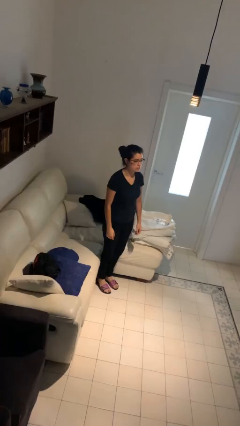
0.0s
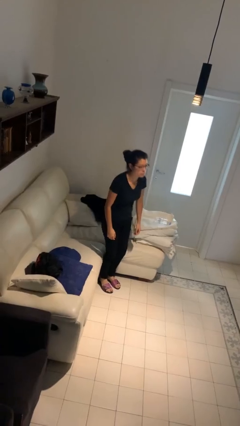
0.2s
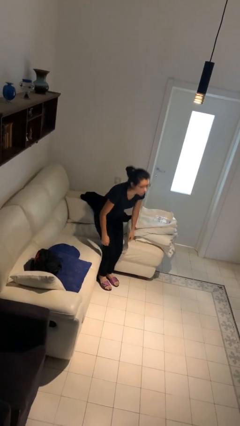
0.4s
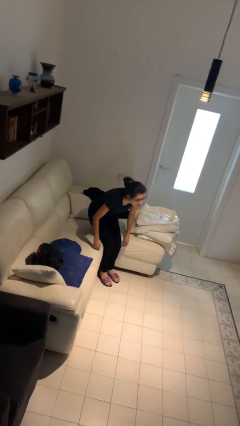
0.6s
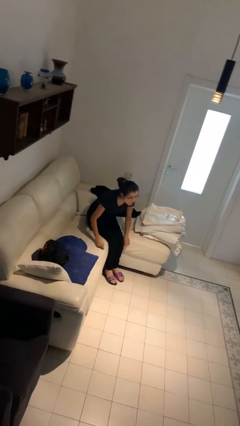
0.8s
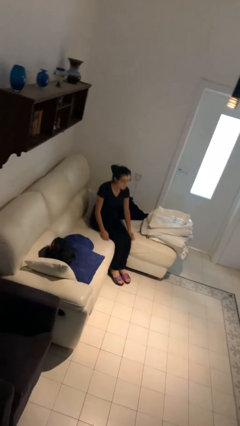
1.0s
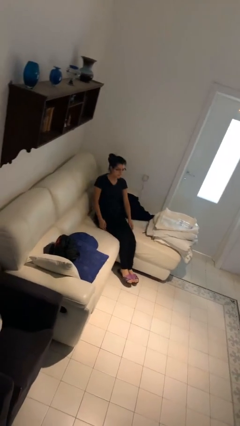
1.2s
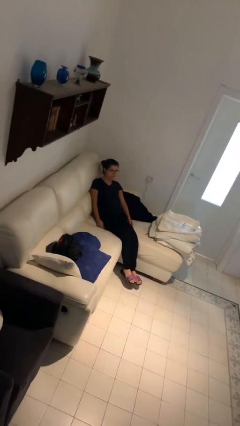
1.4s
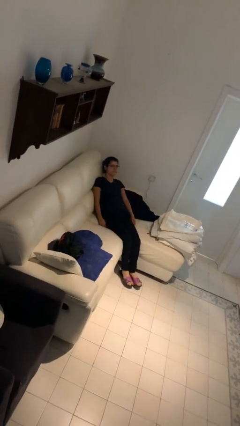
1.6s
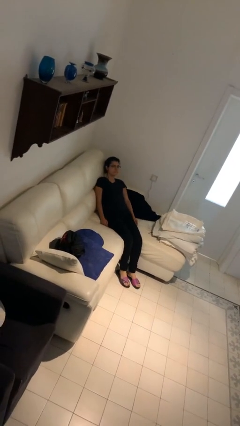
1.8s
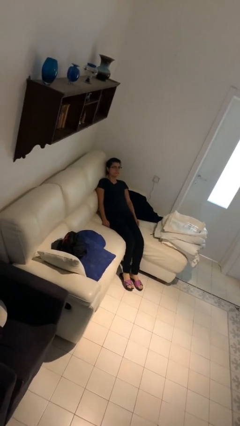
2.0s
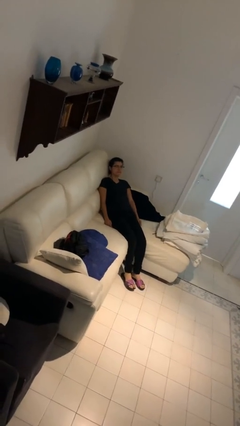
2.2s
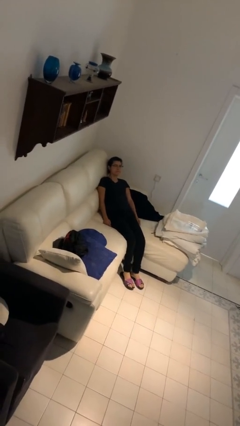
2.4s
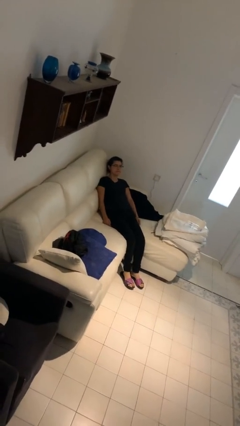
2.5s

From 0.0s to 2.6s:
person lies down on couch

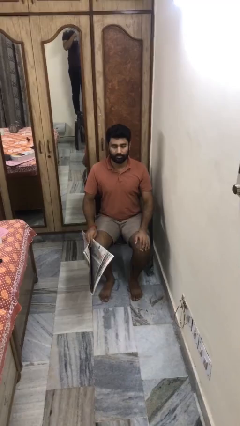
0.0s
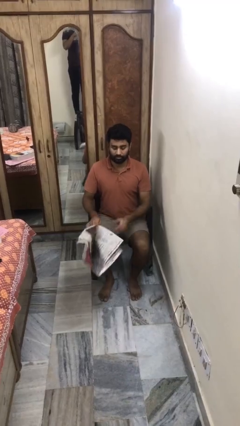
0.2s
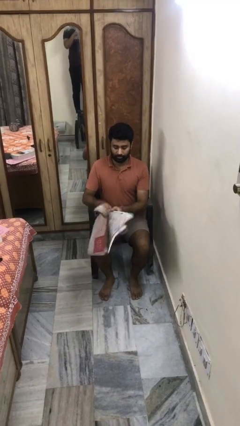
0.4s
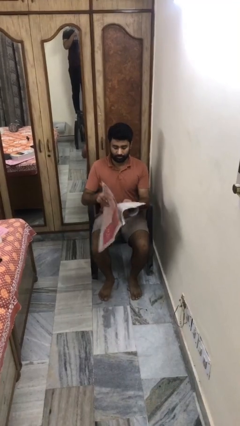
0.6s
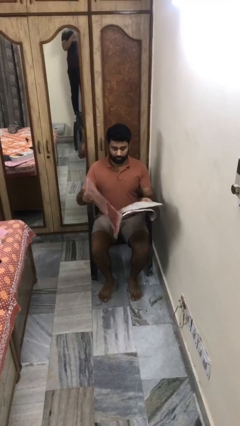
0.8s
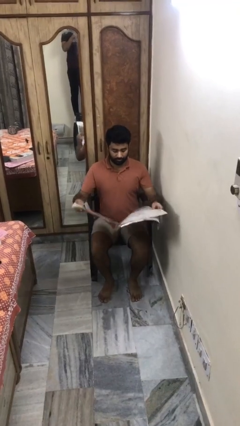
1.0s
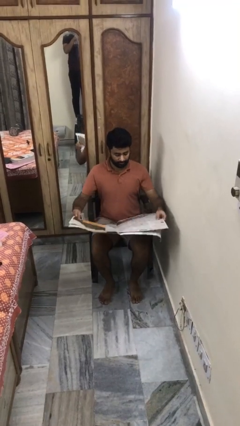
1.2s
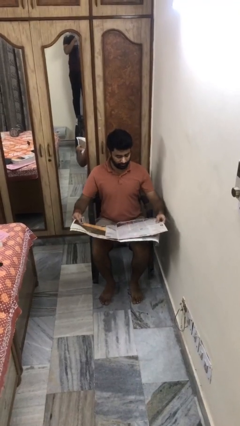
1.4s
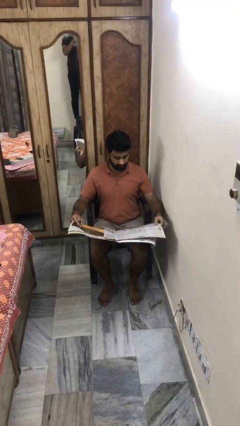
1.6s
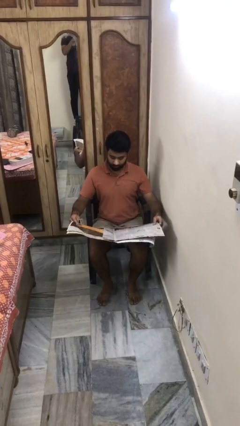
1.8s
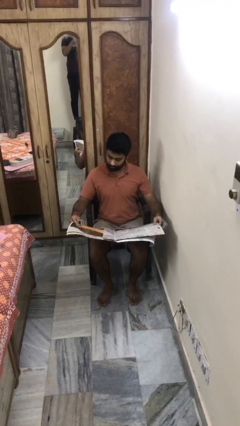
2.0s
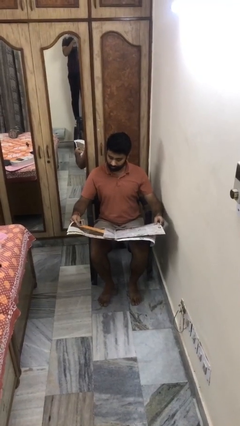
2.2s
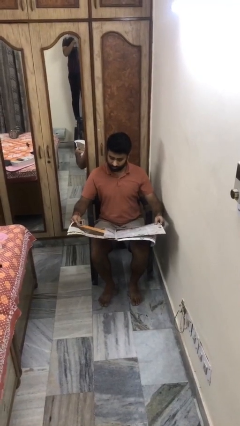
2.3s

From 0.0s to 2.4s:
person reads newspaper

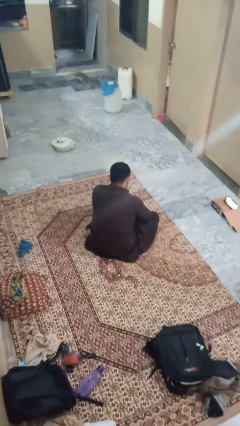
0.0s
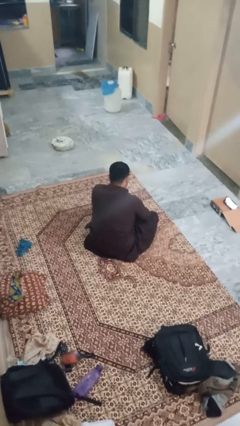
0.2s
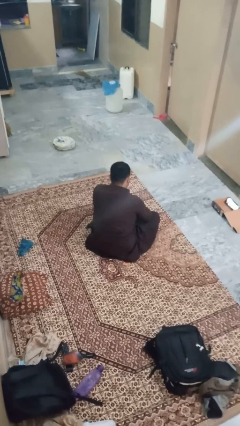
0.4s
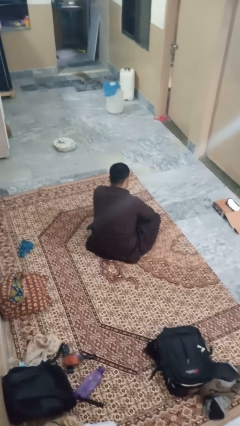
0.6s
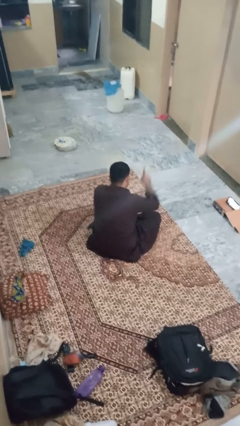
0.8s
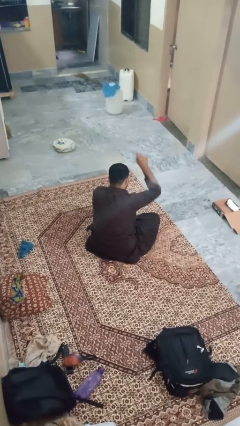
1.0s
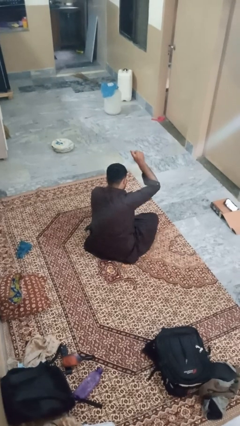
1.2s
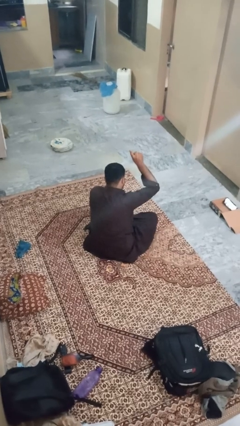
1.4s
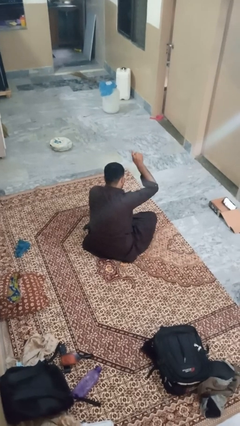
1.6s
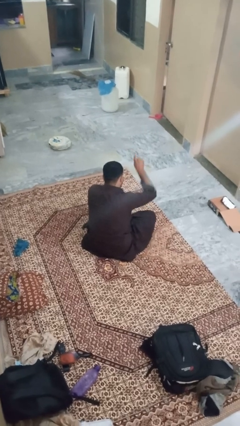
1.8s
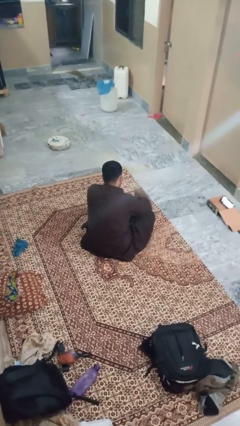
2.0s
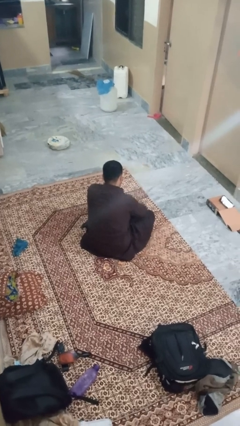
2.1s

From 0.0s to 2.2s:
person gestures number one

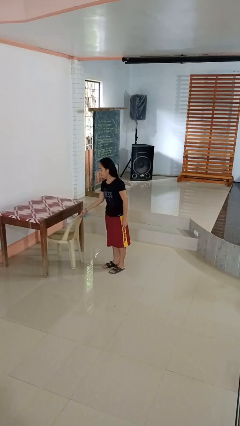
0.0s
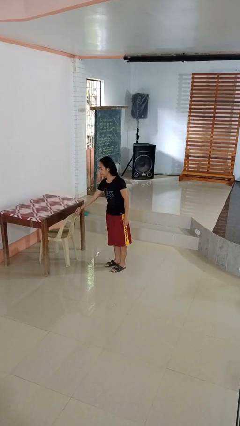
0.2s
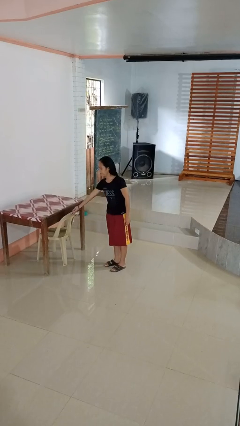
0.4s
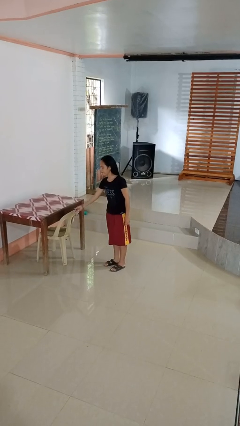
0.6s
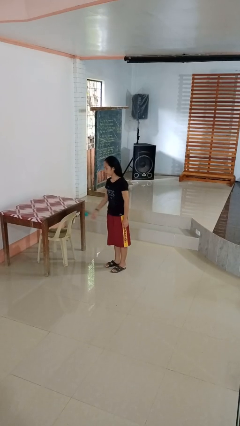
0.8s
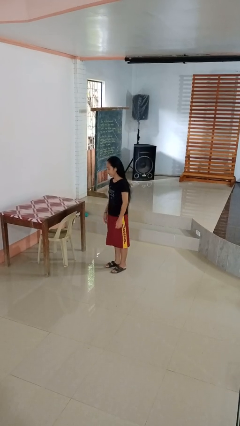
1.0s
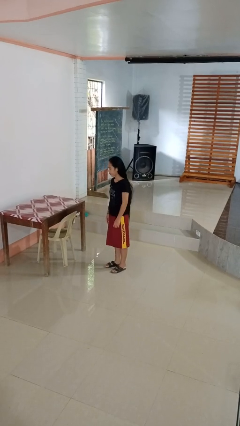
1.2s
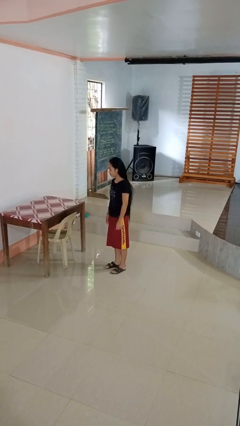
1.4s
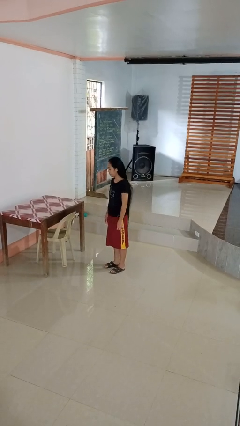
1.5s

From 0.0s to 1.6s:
person pushes in chair

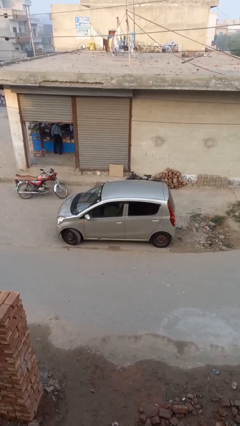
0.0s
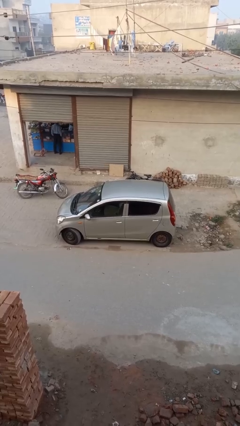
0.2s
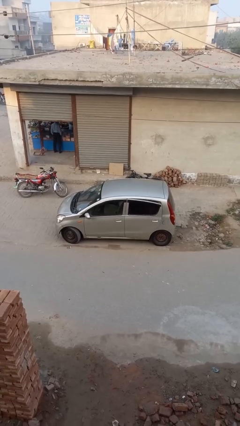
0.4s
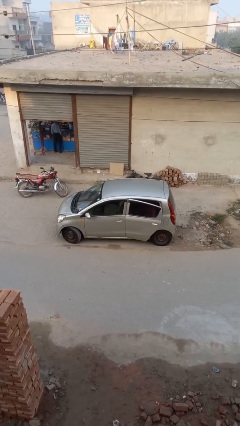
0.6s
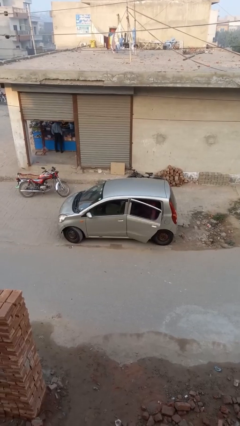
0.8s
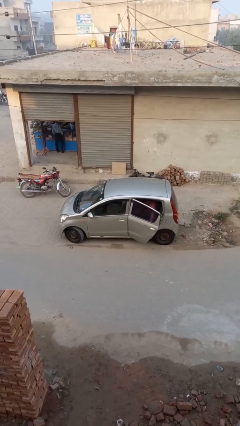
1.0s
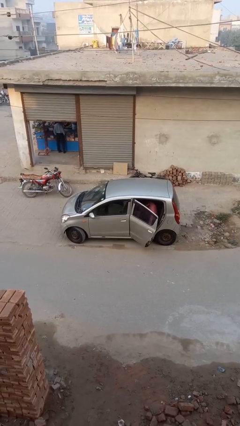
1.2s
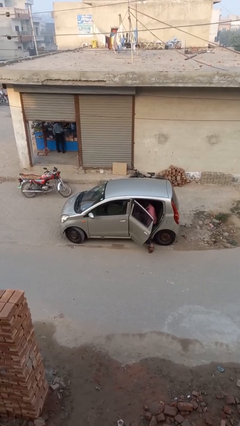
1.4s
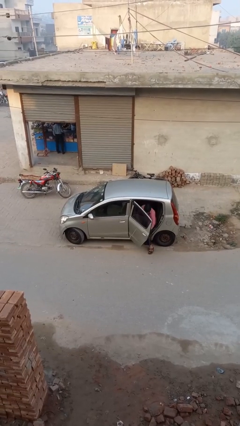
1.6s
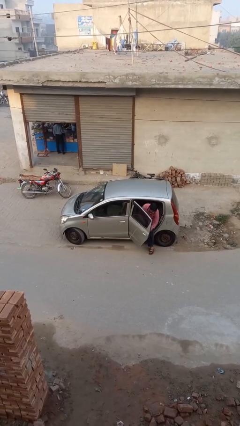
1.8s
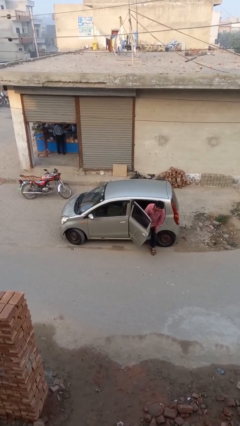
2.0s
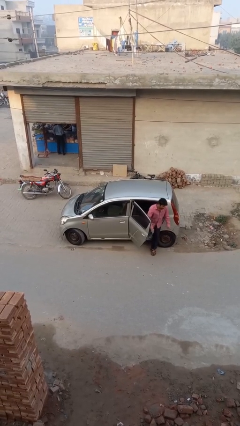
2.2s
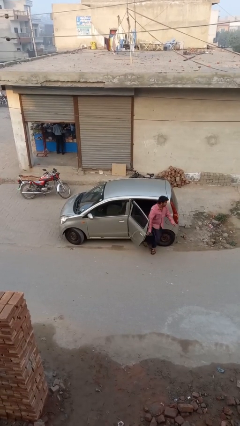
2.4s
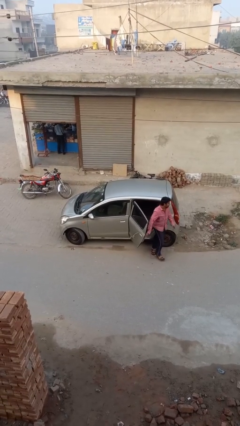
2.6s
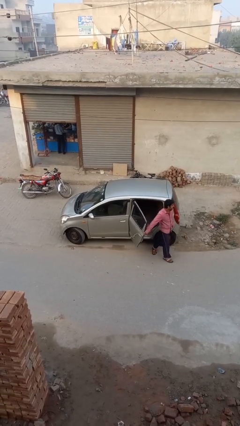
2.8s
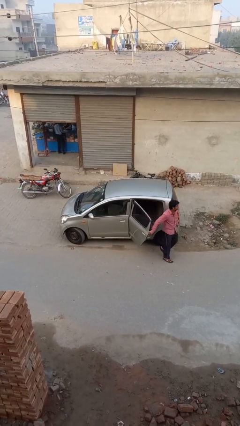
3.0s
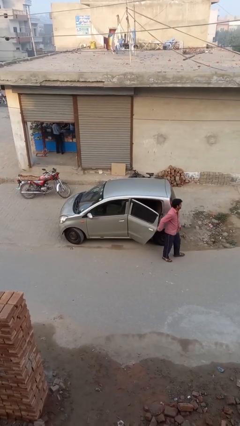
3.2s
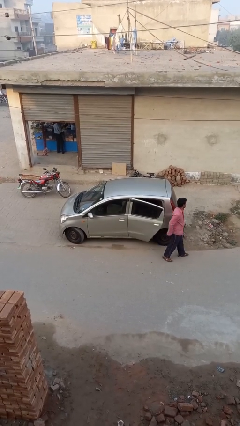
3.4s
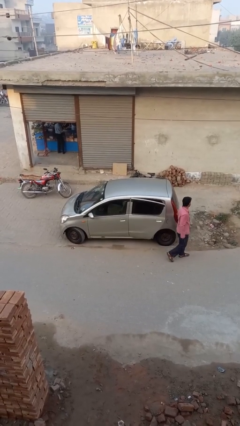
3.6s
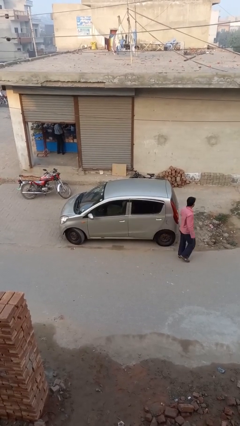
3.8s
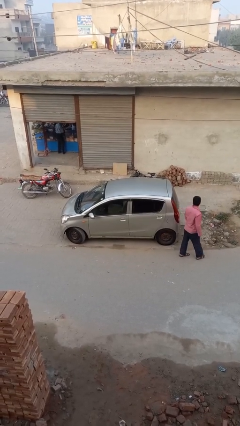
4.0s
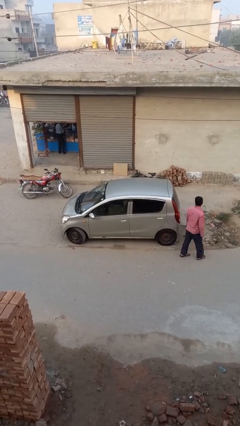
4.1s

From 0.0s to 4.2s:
car drops off person

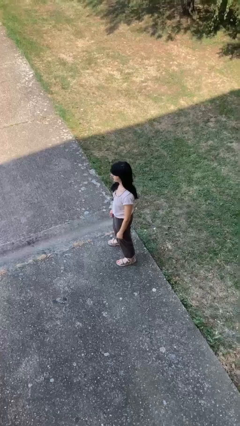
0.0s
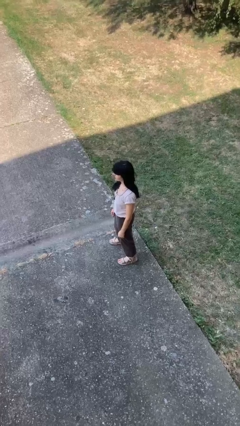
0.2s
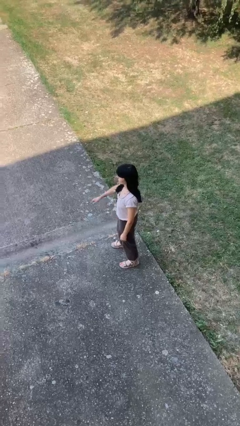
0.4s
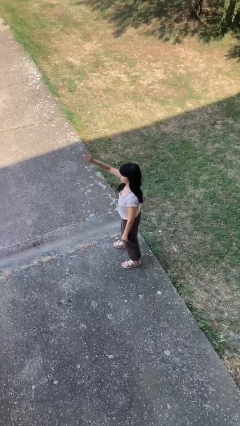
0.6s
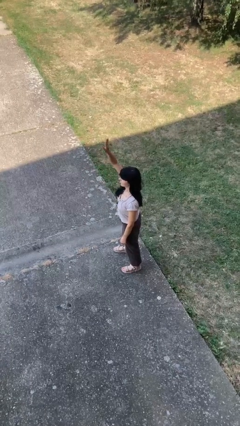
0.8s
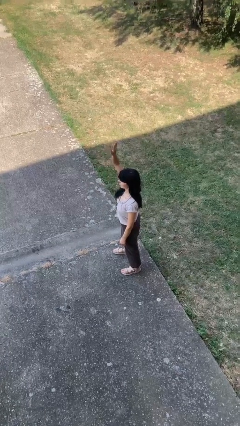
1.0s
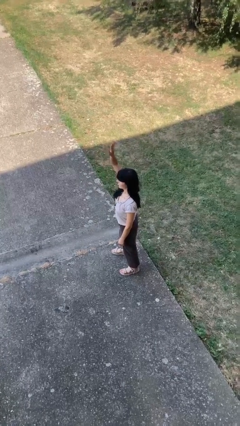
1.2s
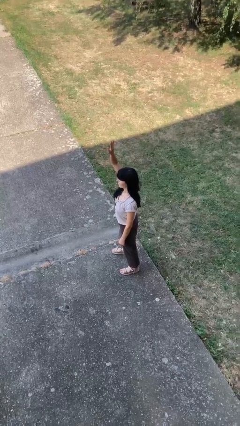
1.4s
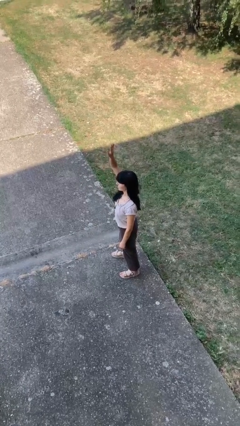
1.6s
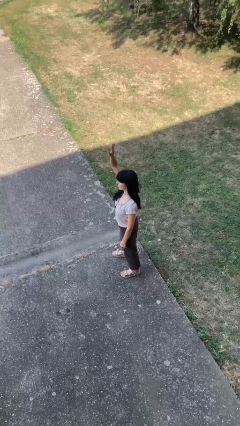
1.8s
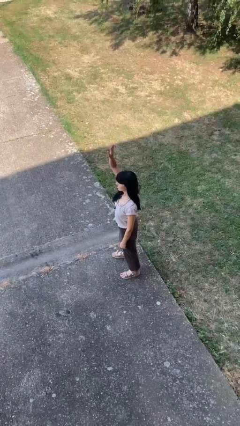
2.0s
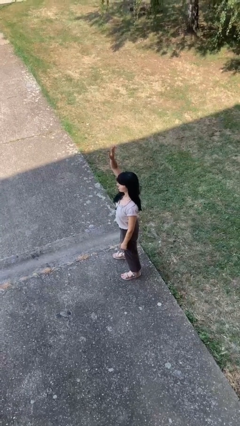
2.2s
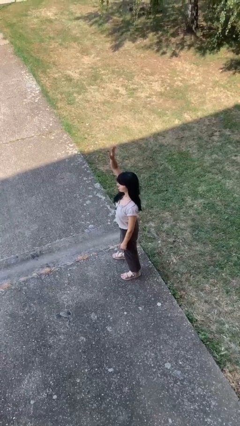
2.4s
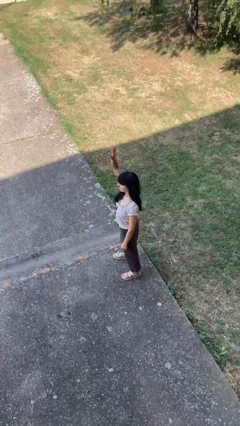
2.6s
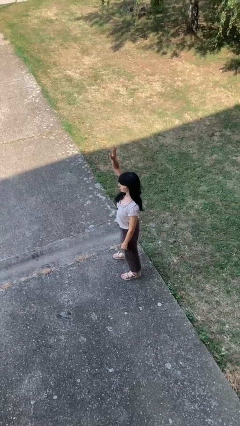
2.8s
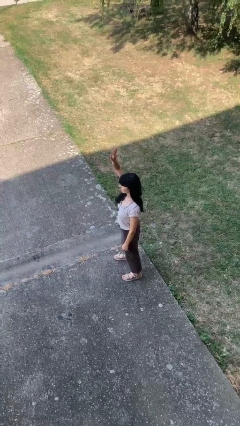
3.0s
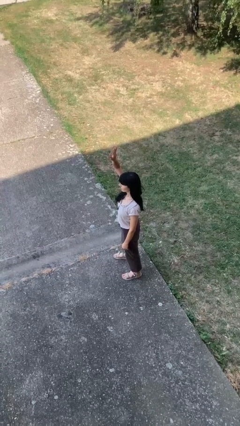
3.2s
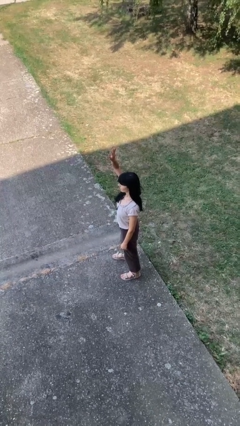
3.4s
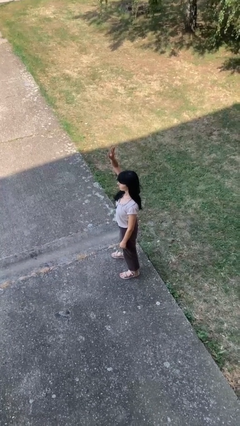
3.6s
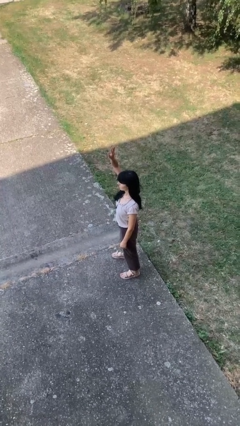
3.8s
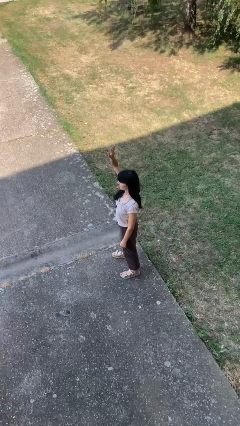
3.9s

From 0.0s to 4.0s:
person gestures raise hand

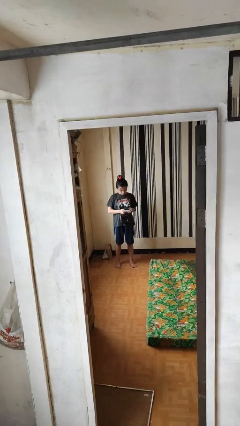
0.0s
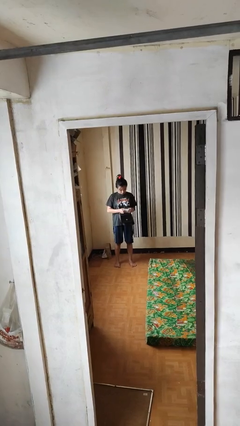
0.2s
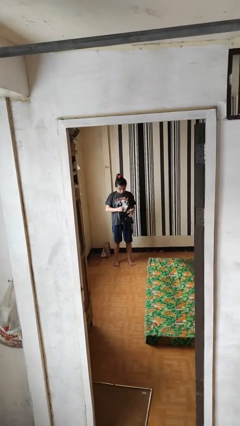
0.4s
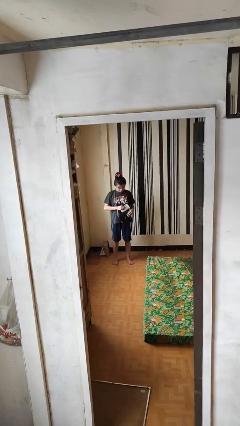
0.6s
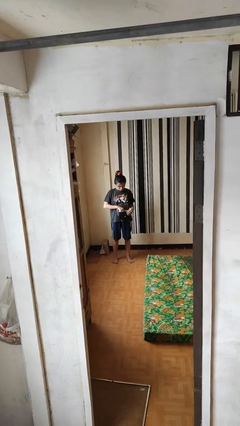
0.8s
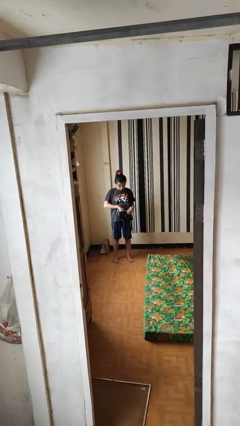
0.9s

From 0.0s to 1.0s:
person puts object into purse
